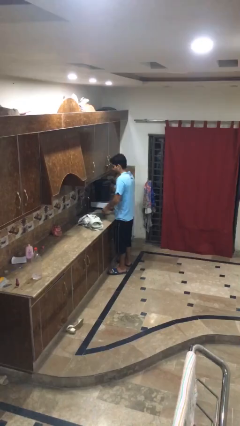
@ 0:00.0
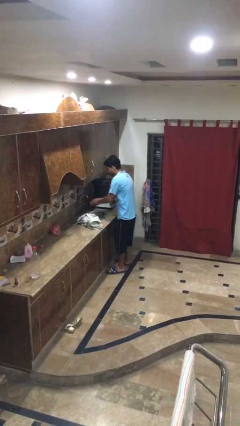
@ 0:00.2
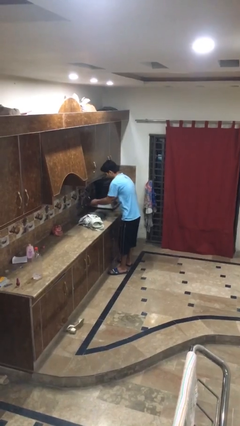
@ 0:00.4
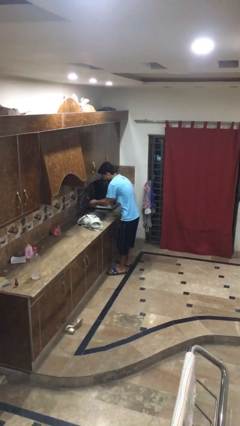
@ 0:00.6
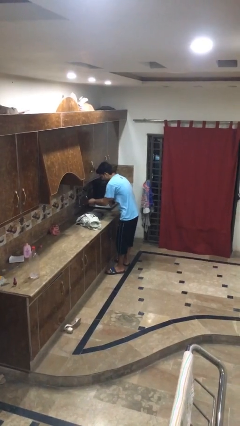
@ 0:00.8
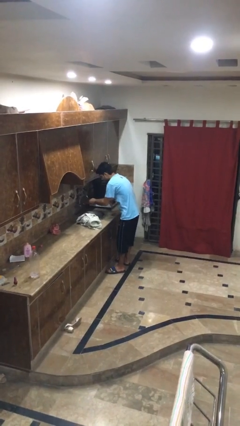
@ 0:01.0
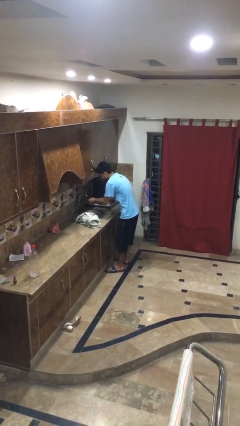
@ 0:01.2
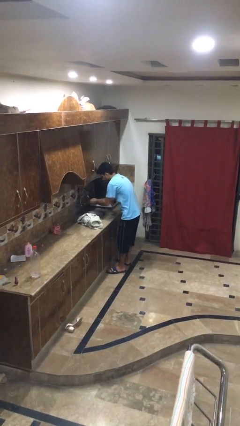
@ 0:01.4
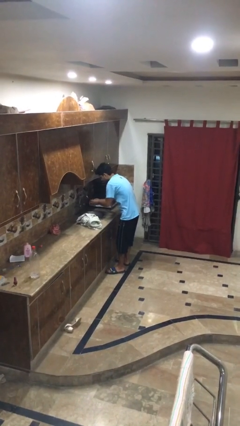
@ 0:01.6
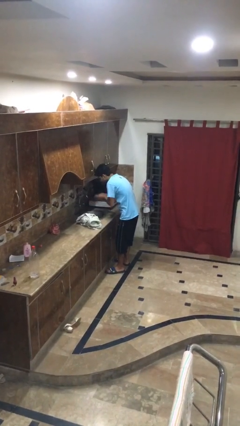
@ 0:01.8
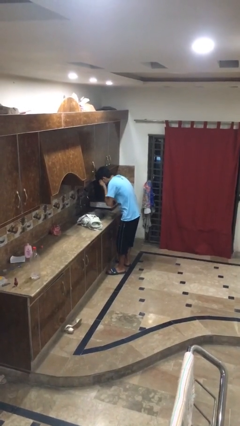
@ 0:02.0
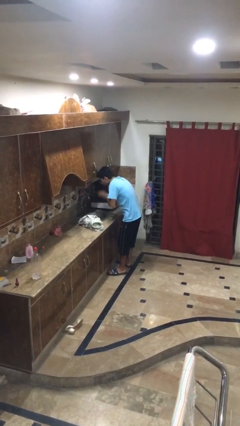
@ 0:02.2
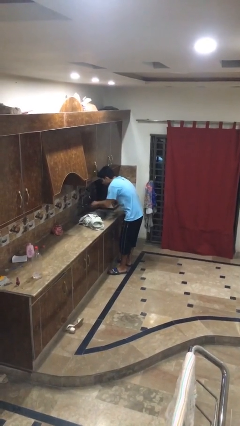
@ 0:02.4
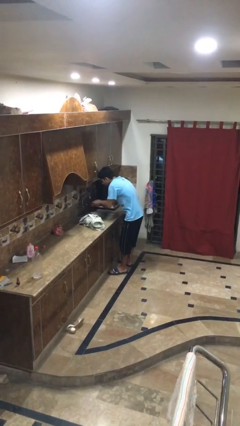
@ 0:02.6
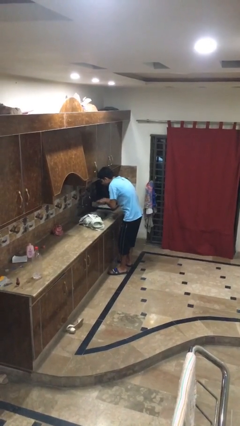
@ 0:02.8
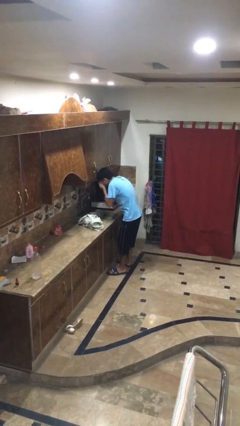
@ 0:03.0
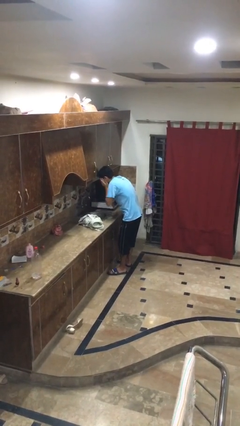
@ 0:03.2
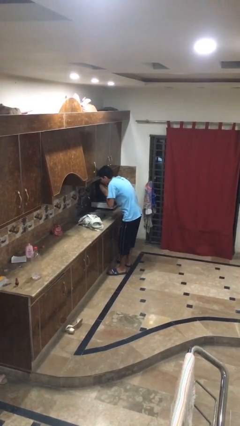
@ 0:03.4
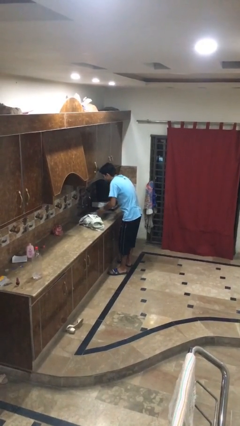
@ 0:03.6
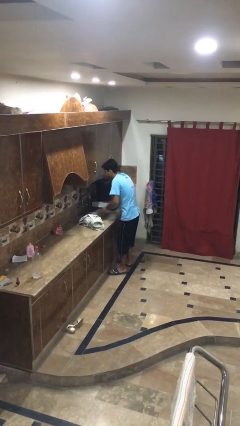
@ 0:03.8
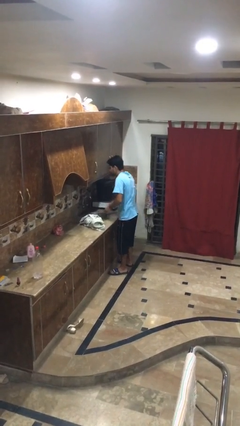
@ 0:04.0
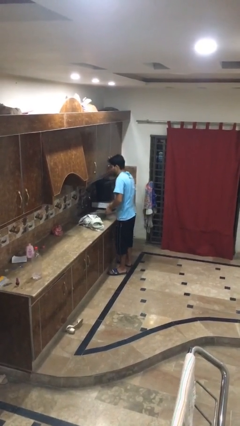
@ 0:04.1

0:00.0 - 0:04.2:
person washes face

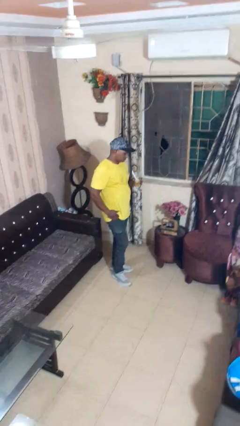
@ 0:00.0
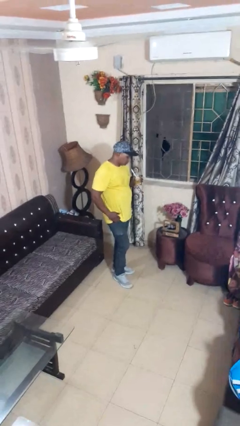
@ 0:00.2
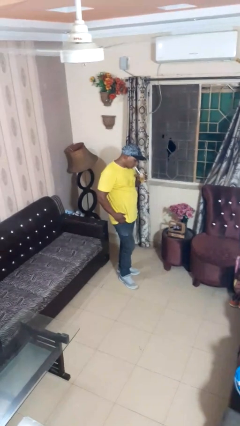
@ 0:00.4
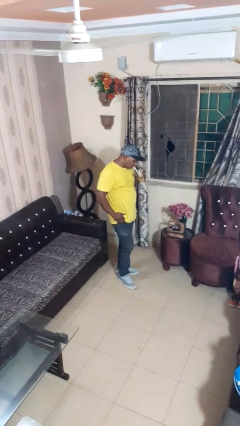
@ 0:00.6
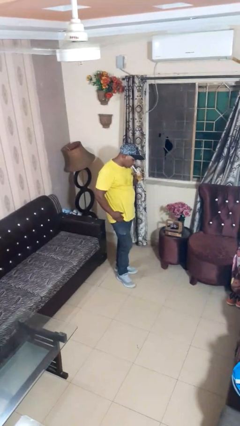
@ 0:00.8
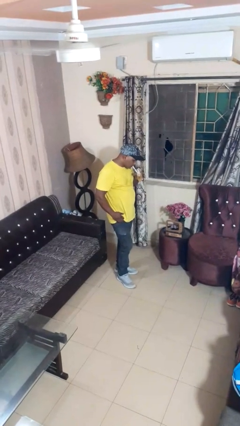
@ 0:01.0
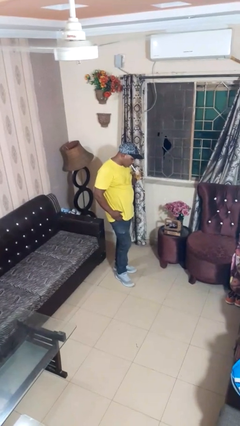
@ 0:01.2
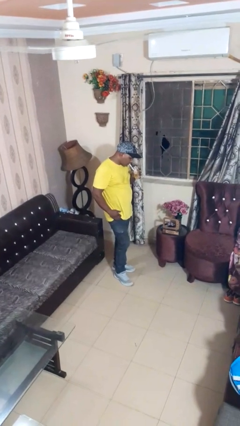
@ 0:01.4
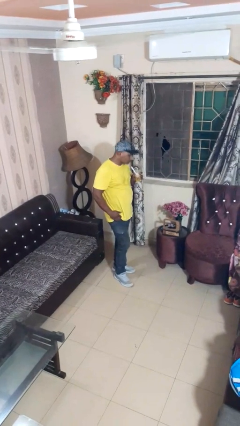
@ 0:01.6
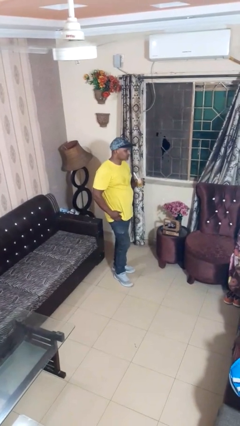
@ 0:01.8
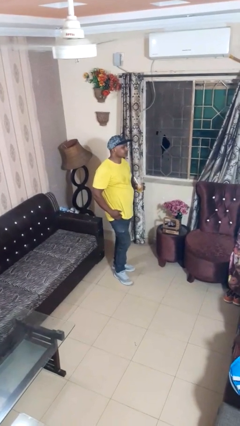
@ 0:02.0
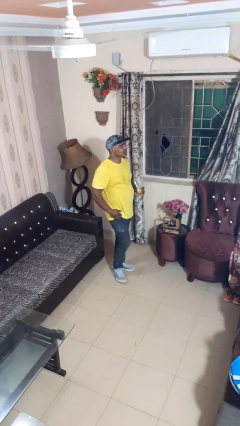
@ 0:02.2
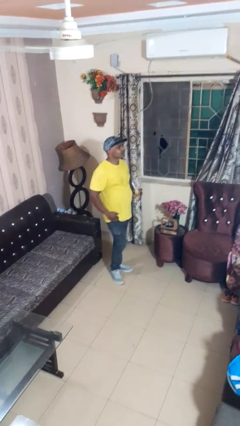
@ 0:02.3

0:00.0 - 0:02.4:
person drinks from straw

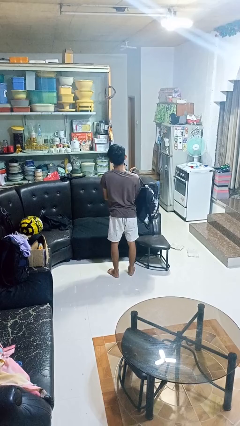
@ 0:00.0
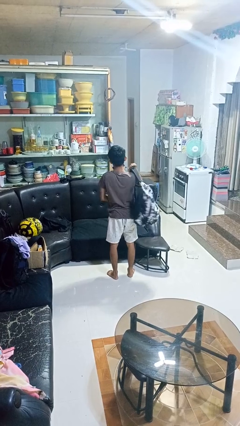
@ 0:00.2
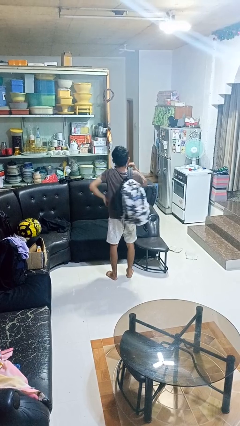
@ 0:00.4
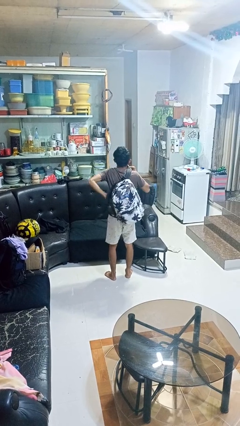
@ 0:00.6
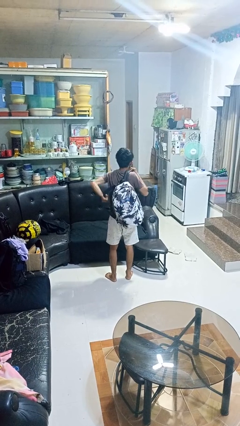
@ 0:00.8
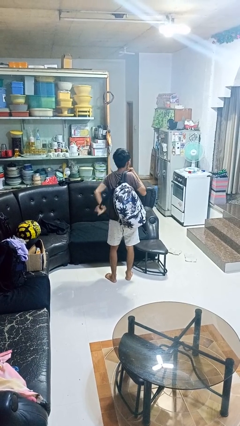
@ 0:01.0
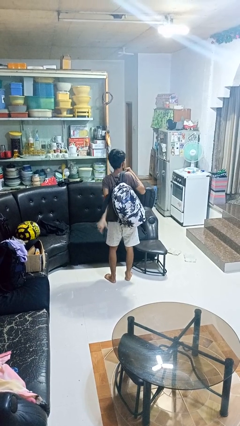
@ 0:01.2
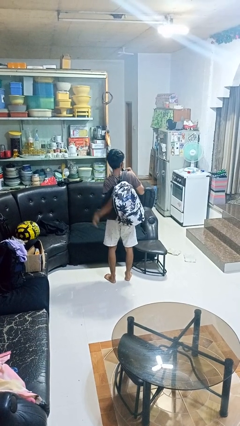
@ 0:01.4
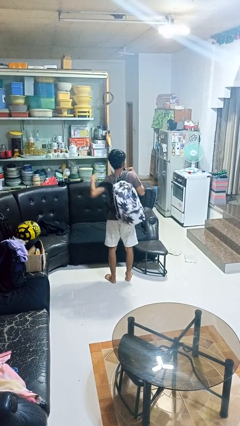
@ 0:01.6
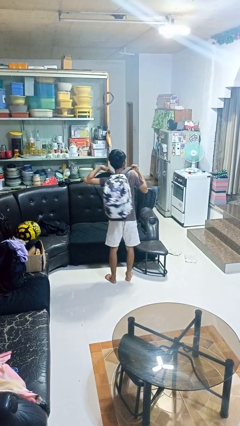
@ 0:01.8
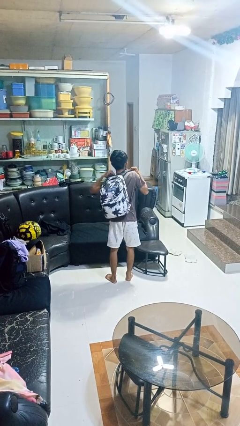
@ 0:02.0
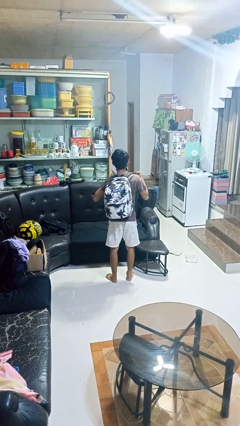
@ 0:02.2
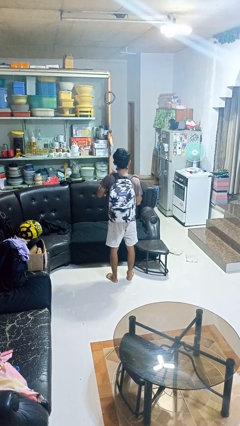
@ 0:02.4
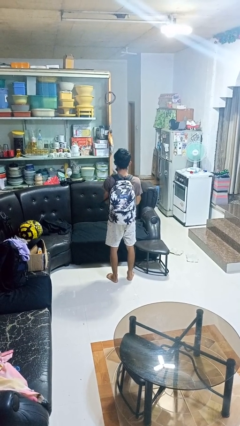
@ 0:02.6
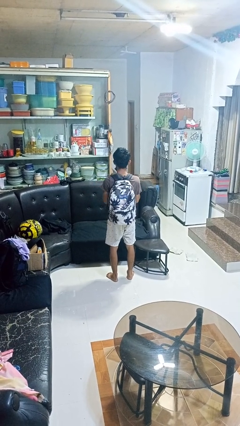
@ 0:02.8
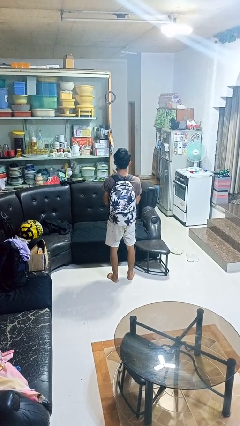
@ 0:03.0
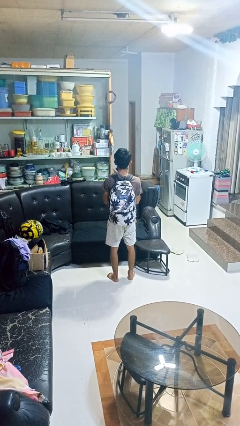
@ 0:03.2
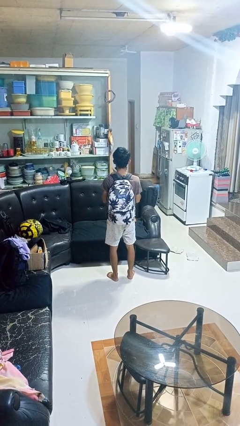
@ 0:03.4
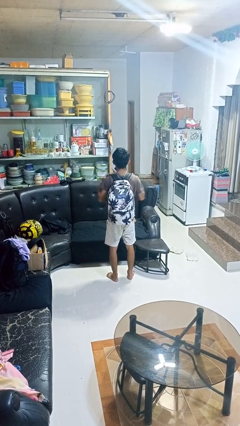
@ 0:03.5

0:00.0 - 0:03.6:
person puts on backpack

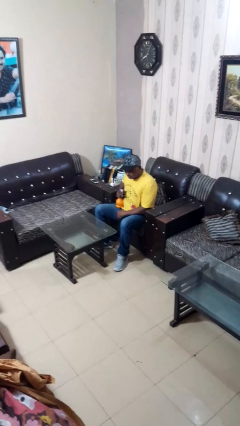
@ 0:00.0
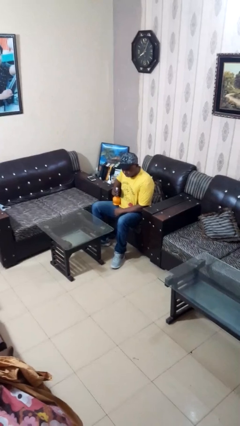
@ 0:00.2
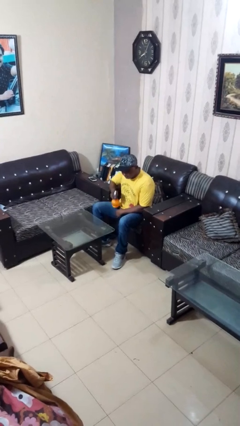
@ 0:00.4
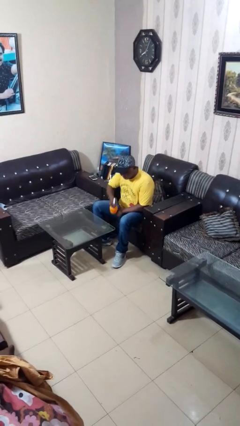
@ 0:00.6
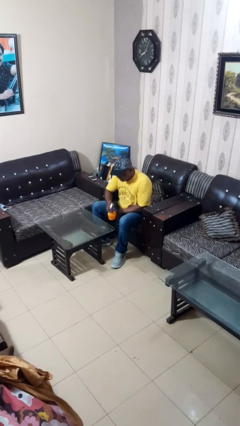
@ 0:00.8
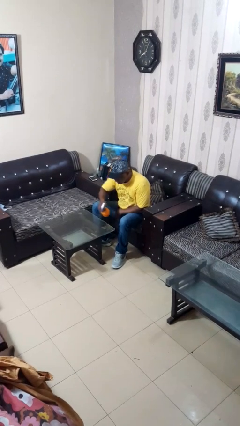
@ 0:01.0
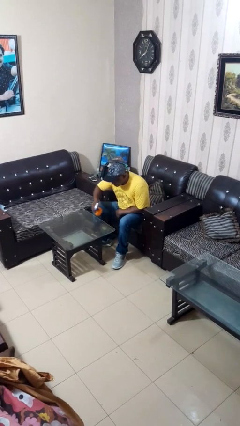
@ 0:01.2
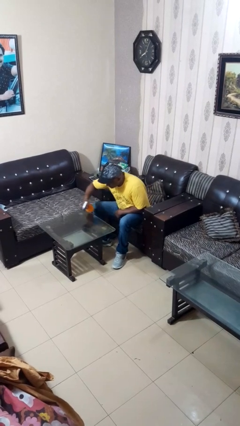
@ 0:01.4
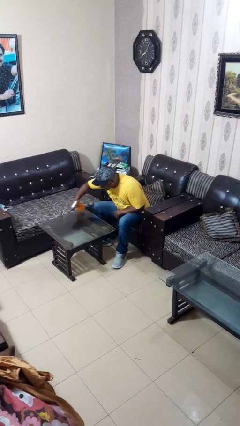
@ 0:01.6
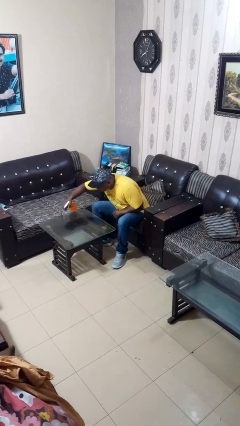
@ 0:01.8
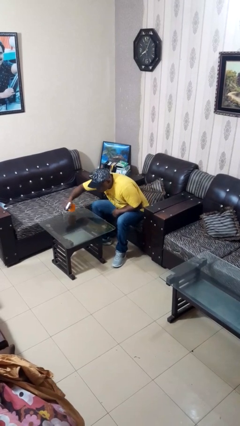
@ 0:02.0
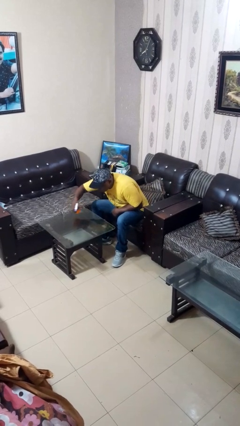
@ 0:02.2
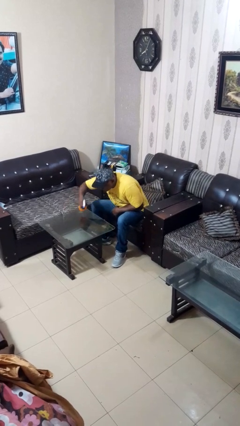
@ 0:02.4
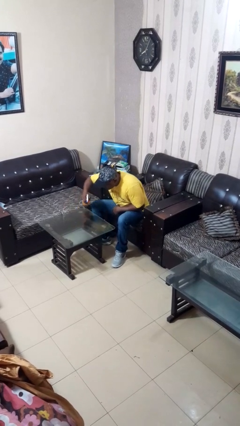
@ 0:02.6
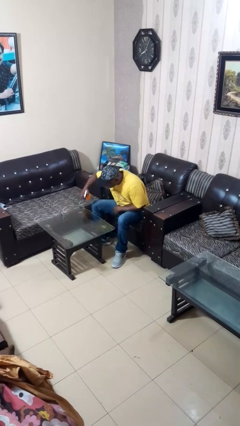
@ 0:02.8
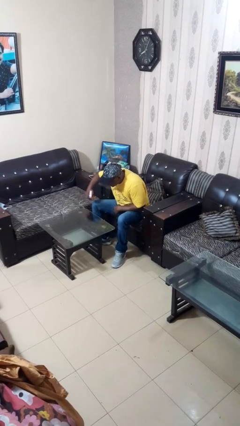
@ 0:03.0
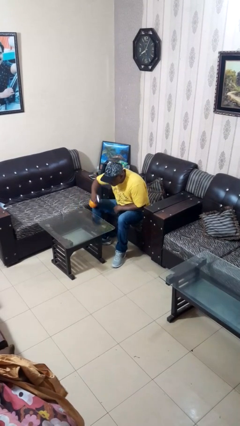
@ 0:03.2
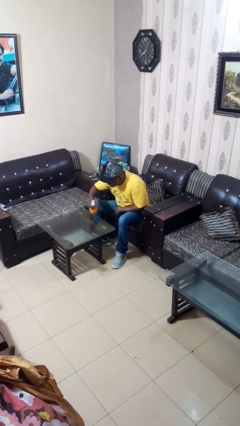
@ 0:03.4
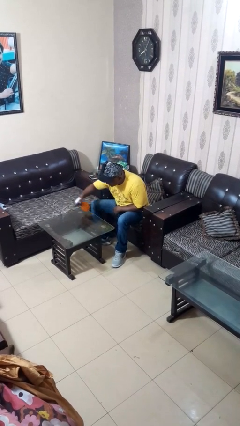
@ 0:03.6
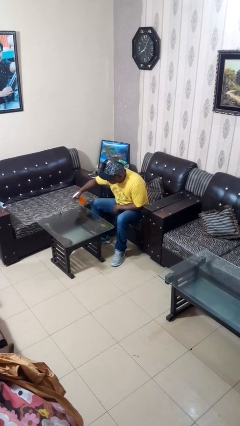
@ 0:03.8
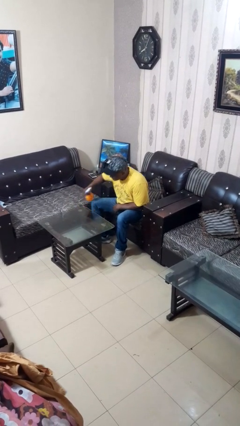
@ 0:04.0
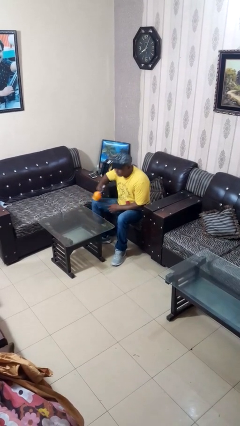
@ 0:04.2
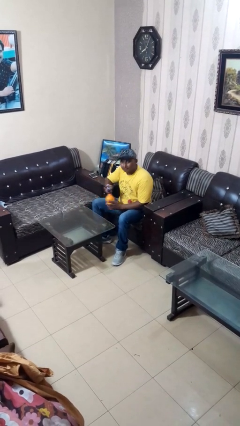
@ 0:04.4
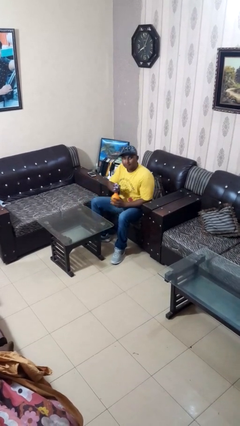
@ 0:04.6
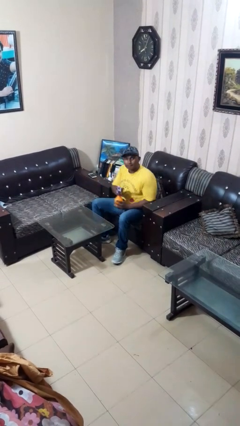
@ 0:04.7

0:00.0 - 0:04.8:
person sprays from bottle

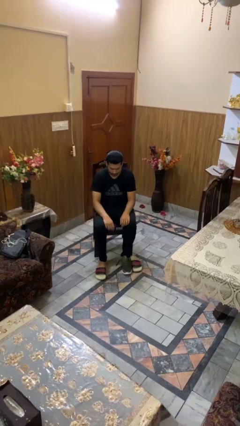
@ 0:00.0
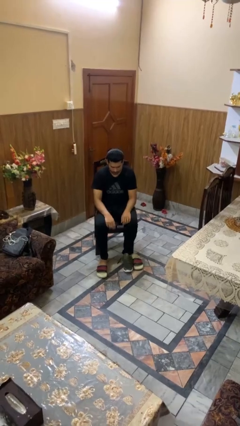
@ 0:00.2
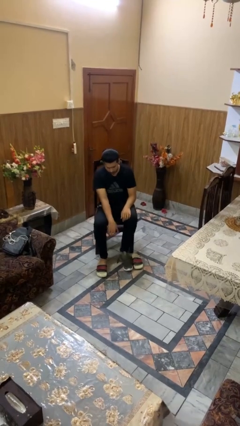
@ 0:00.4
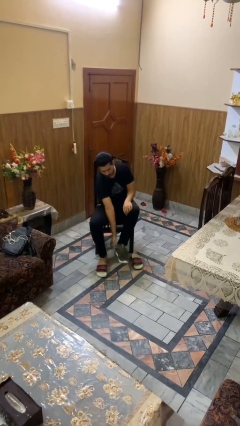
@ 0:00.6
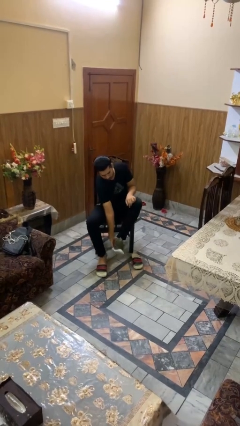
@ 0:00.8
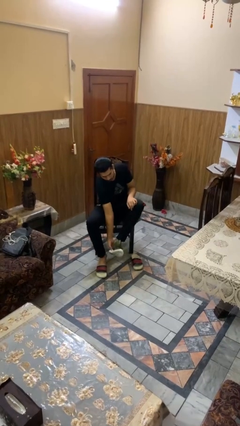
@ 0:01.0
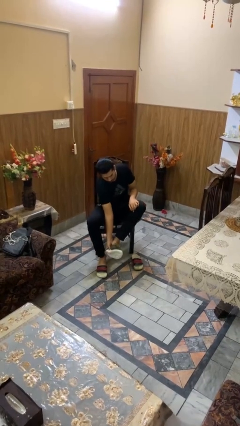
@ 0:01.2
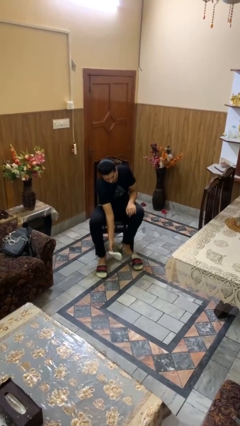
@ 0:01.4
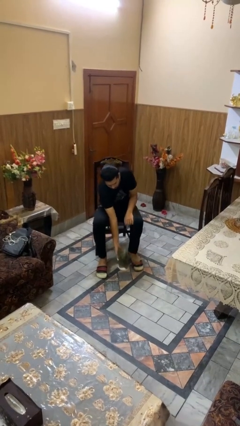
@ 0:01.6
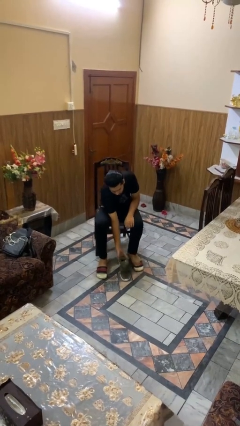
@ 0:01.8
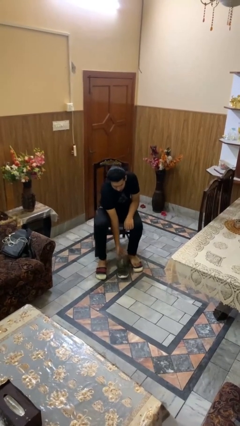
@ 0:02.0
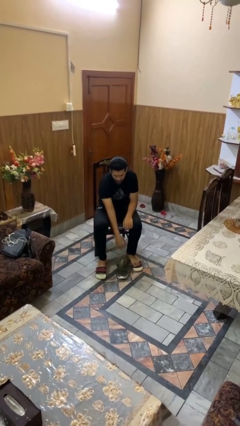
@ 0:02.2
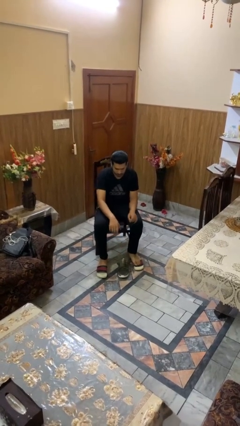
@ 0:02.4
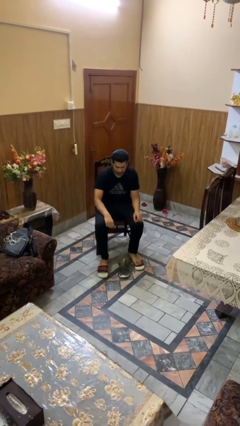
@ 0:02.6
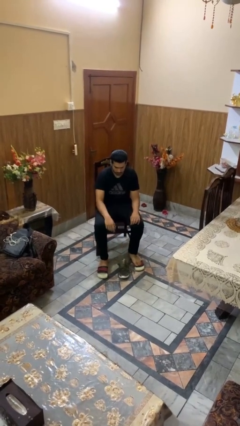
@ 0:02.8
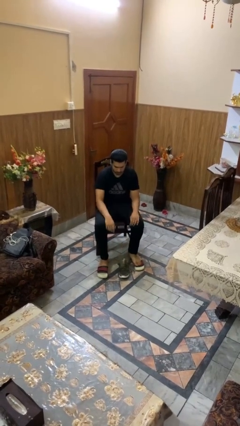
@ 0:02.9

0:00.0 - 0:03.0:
person takes off shoes
